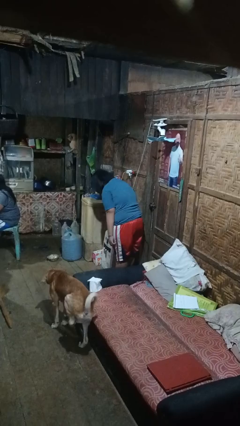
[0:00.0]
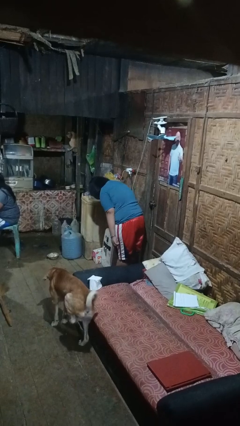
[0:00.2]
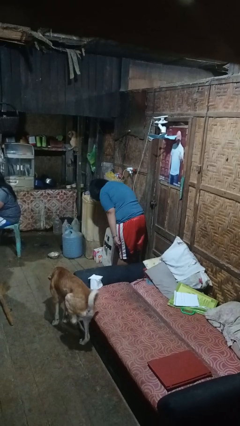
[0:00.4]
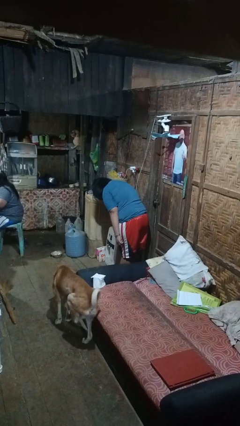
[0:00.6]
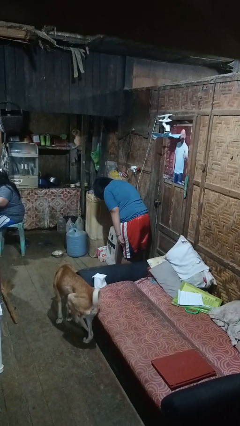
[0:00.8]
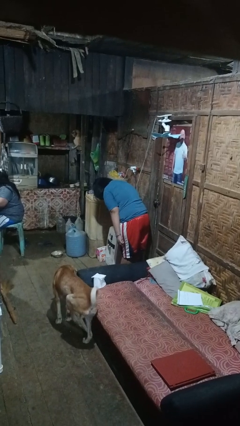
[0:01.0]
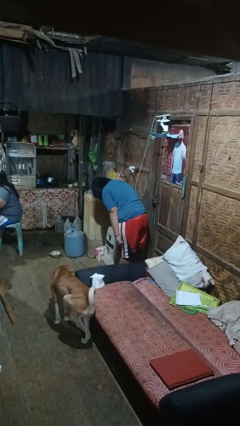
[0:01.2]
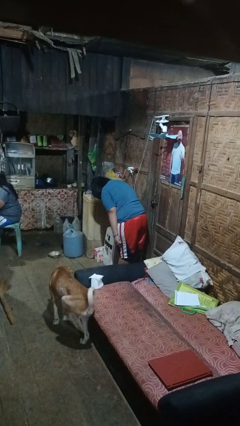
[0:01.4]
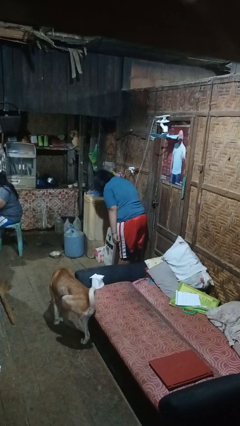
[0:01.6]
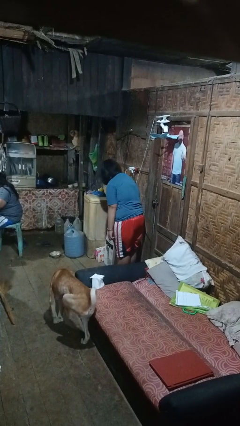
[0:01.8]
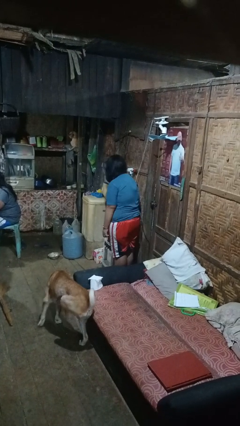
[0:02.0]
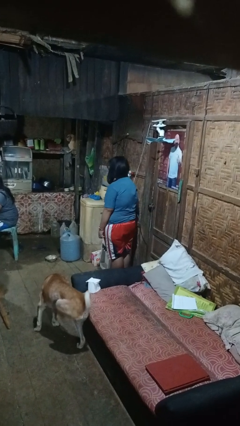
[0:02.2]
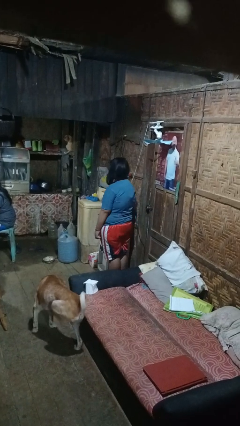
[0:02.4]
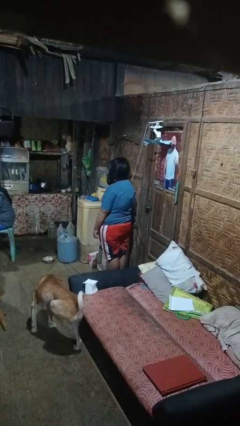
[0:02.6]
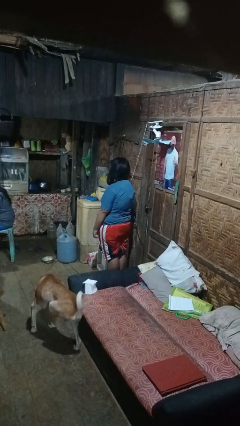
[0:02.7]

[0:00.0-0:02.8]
person bows

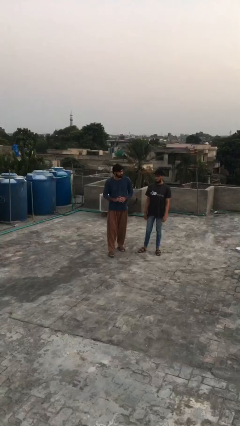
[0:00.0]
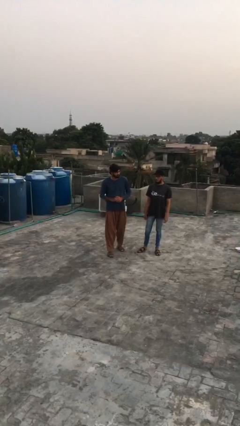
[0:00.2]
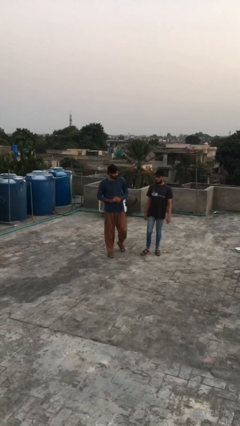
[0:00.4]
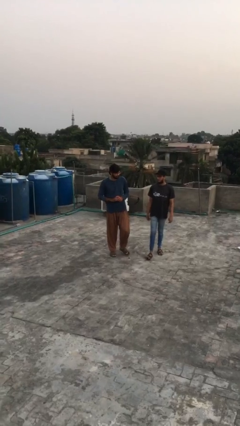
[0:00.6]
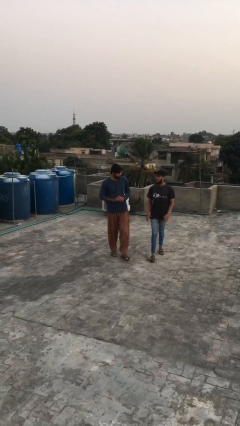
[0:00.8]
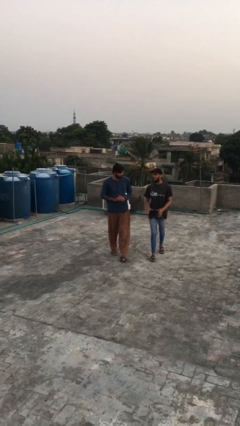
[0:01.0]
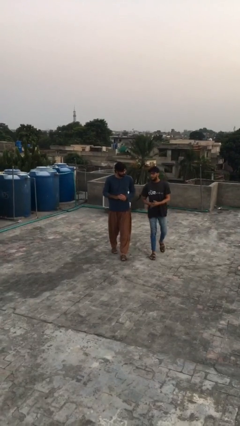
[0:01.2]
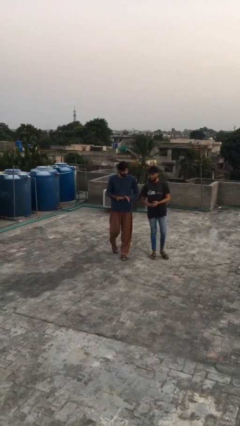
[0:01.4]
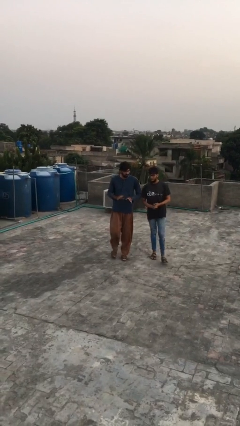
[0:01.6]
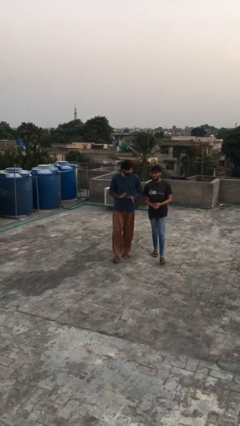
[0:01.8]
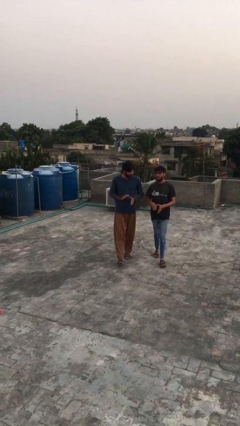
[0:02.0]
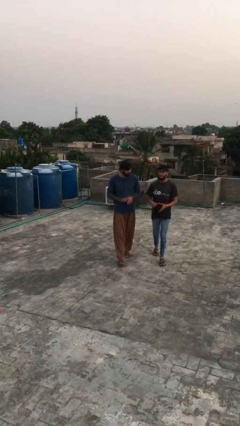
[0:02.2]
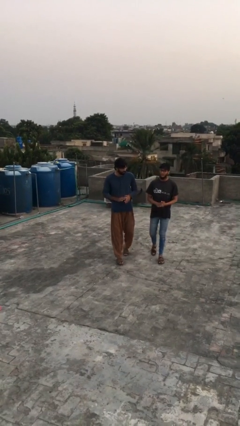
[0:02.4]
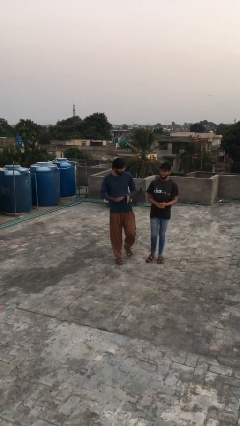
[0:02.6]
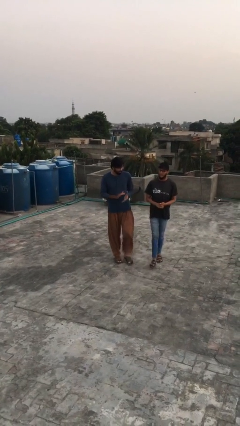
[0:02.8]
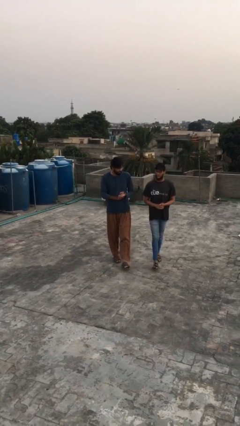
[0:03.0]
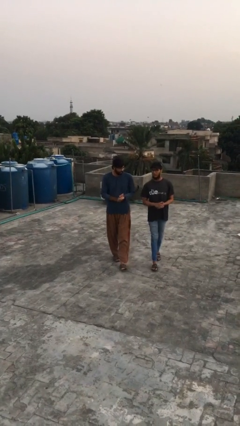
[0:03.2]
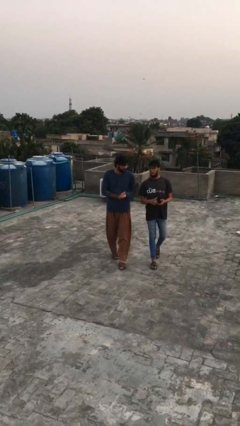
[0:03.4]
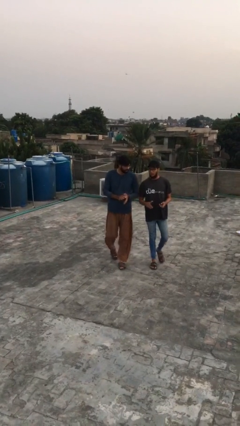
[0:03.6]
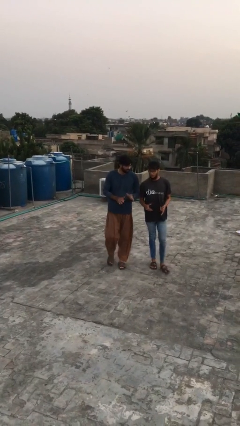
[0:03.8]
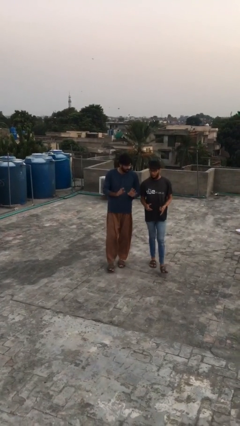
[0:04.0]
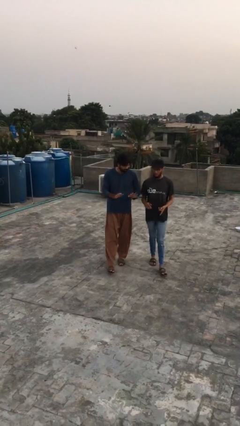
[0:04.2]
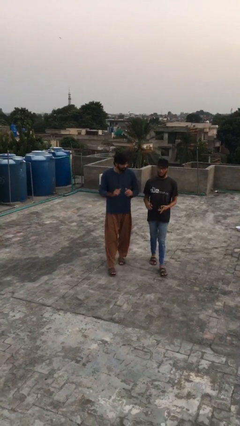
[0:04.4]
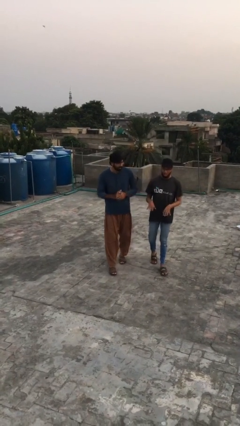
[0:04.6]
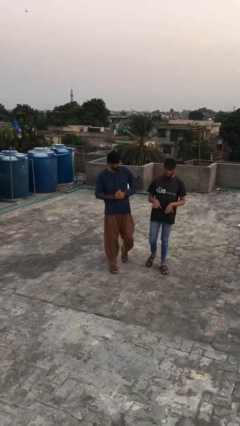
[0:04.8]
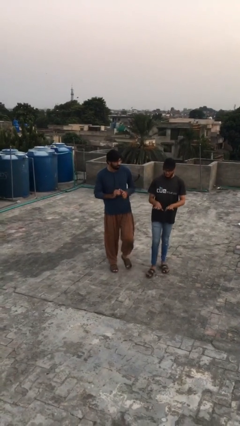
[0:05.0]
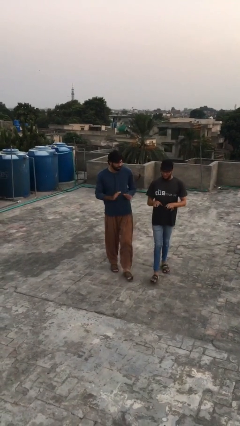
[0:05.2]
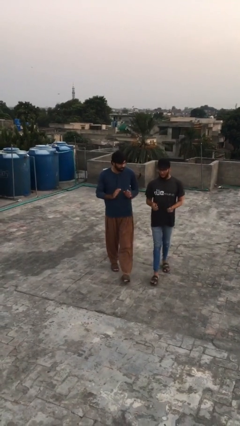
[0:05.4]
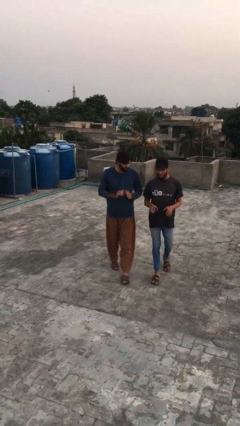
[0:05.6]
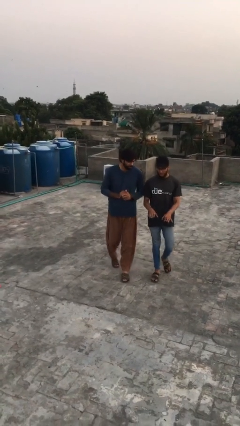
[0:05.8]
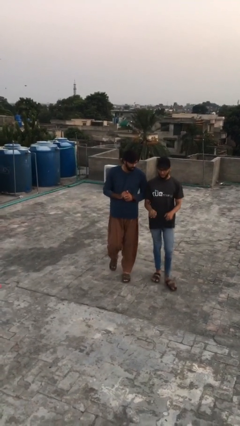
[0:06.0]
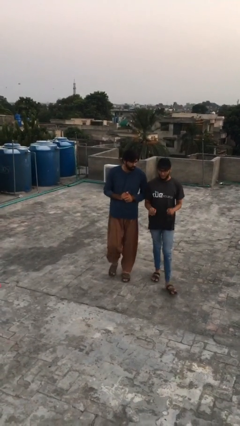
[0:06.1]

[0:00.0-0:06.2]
person talks to person

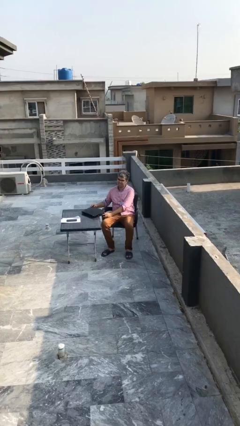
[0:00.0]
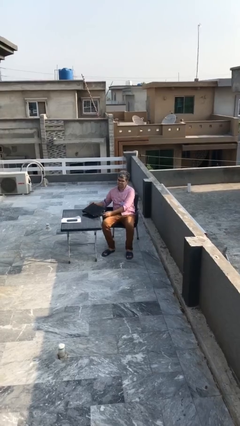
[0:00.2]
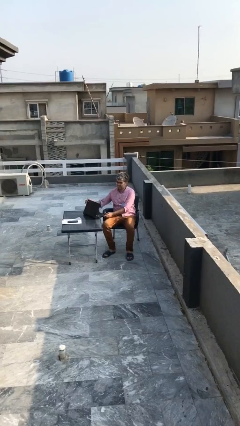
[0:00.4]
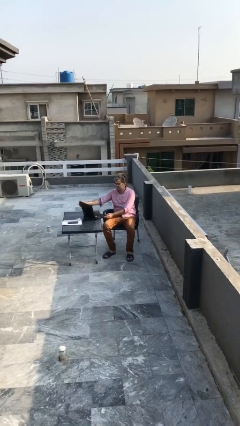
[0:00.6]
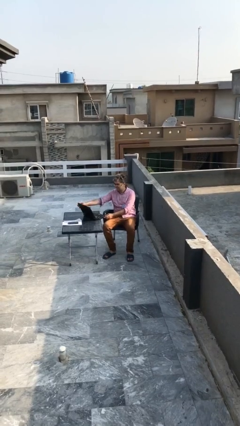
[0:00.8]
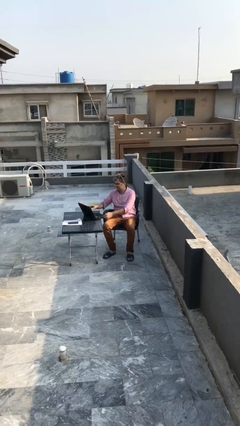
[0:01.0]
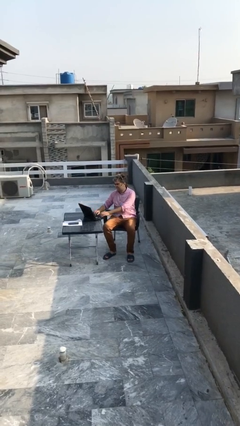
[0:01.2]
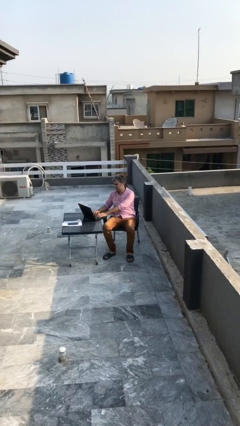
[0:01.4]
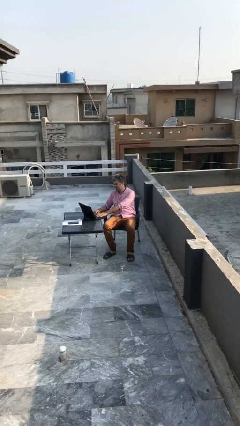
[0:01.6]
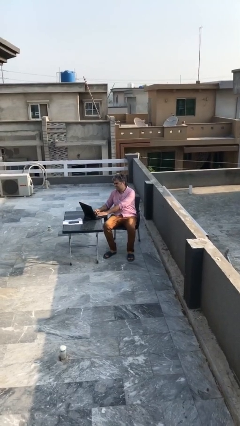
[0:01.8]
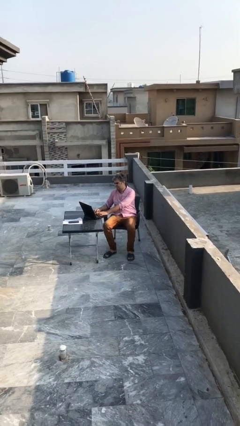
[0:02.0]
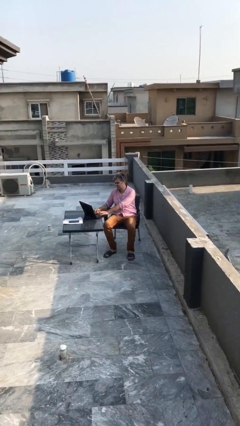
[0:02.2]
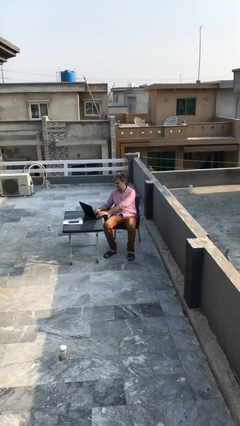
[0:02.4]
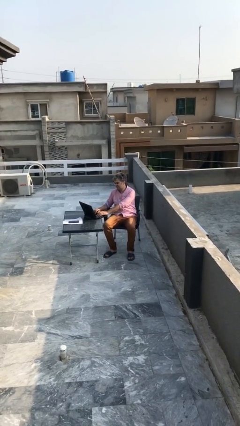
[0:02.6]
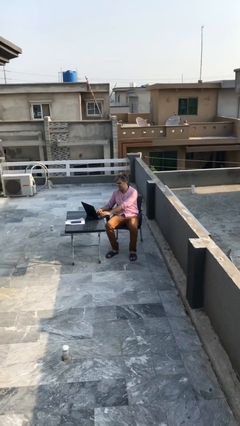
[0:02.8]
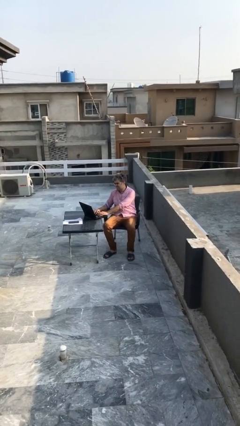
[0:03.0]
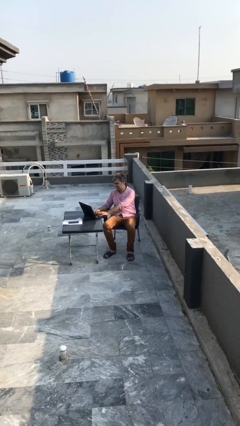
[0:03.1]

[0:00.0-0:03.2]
person interacts with laptop

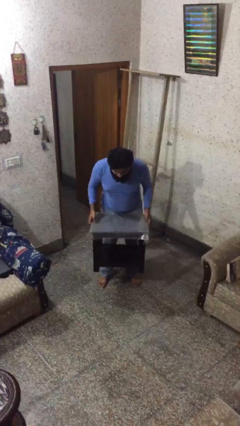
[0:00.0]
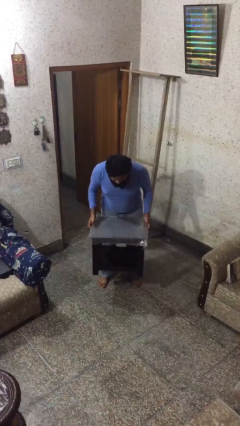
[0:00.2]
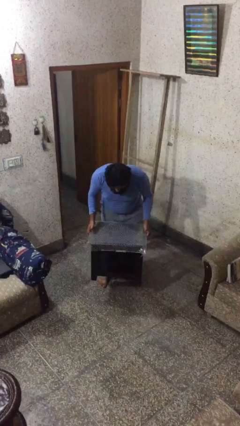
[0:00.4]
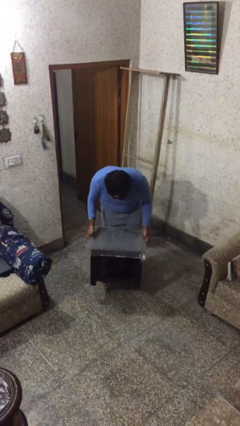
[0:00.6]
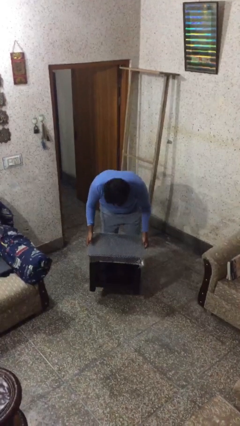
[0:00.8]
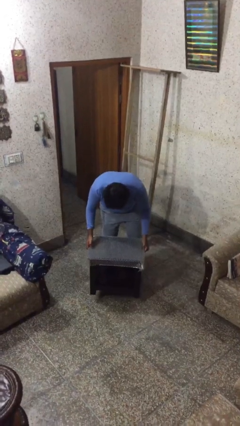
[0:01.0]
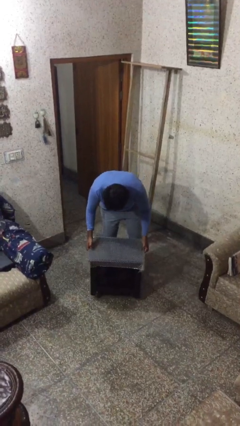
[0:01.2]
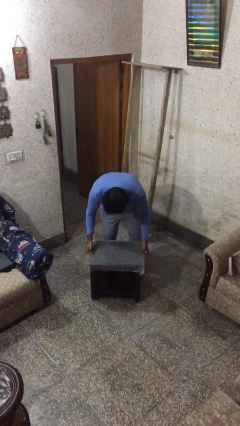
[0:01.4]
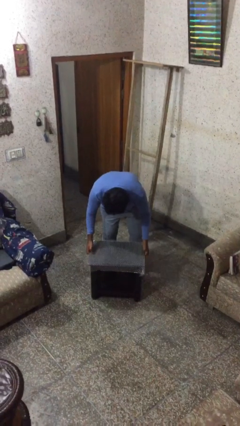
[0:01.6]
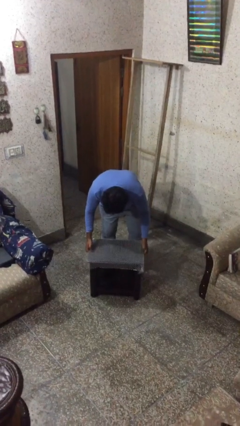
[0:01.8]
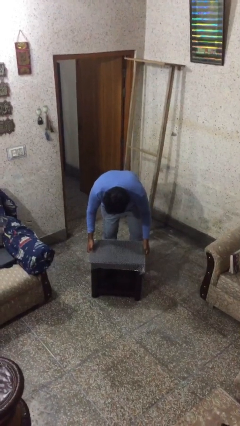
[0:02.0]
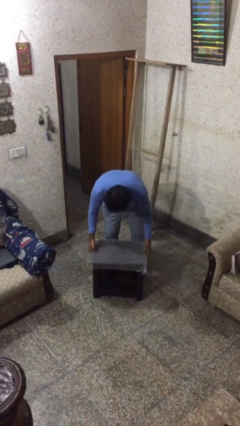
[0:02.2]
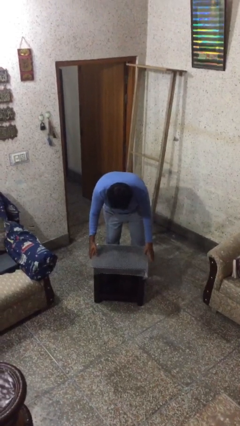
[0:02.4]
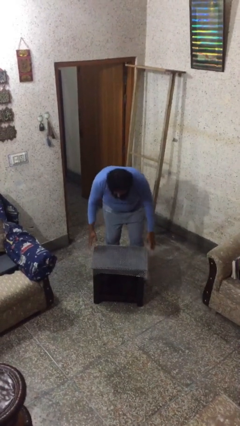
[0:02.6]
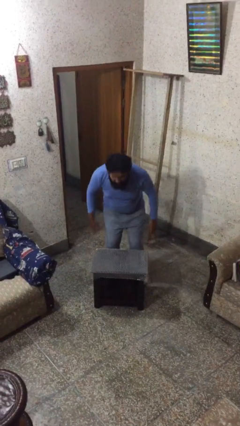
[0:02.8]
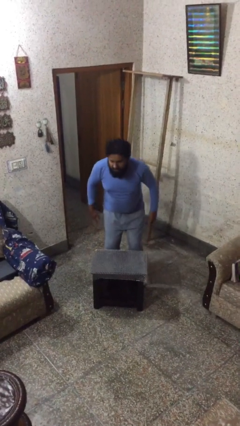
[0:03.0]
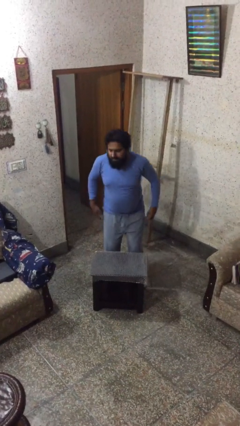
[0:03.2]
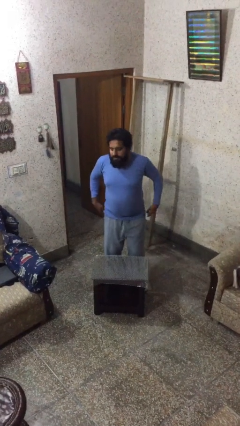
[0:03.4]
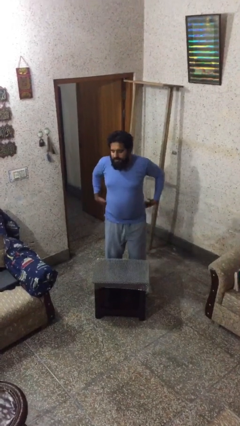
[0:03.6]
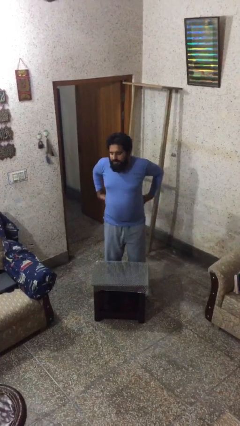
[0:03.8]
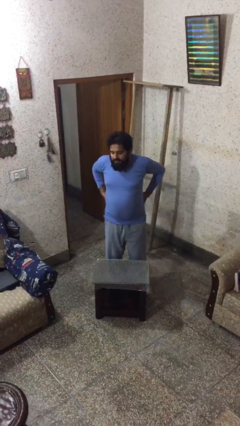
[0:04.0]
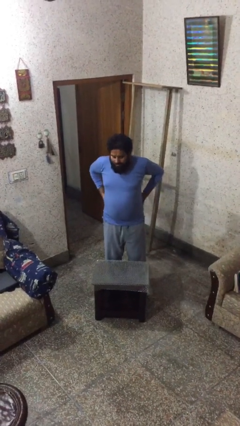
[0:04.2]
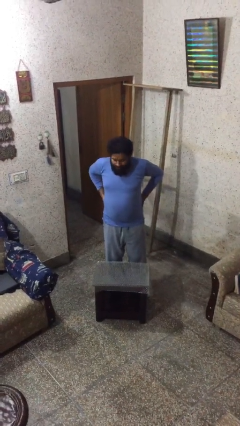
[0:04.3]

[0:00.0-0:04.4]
person puts down object on floor

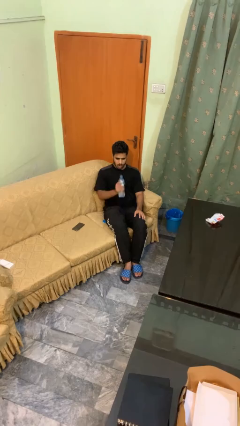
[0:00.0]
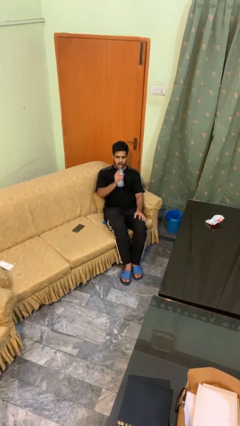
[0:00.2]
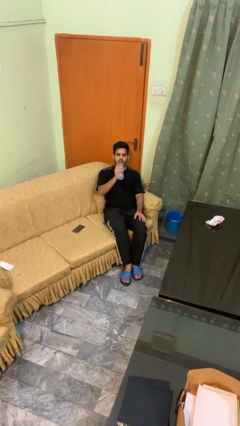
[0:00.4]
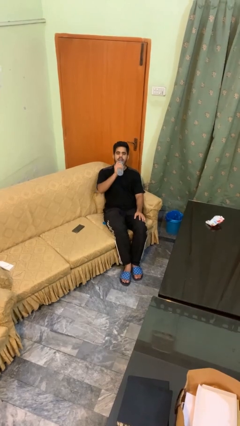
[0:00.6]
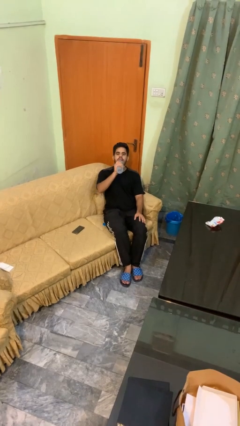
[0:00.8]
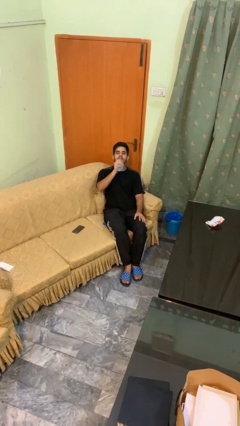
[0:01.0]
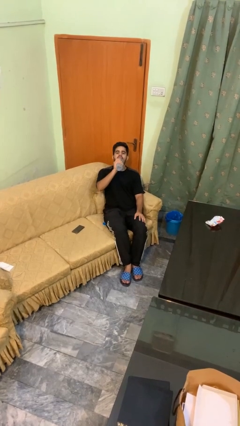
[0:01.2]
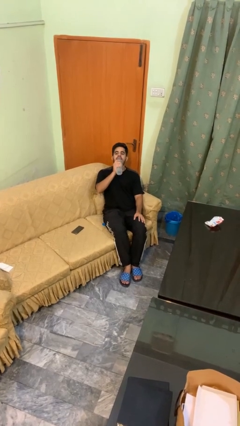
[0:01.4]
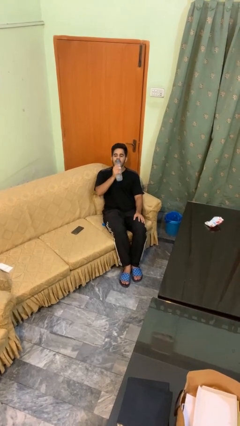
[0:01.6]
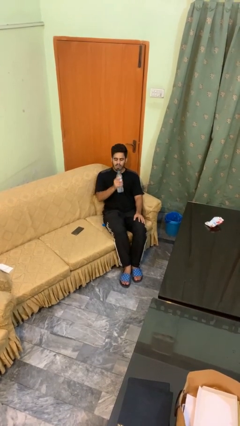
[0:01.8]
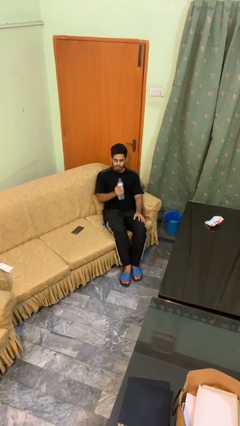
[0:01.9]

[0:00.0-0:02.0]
person drinks from bottle
